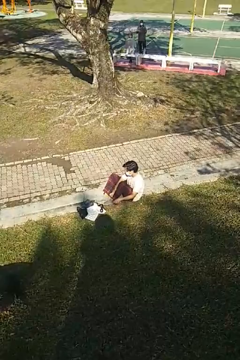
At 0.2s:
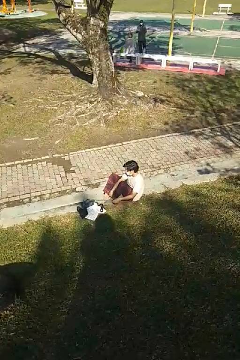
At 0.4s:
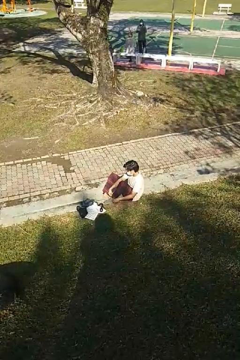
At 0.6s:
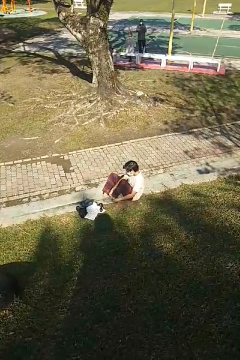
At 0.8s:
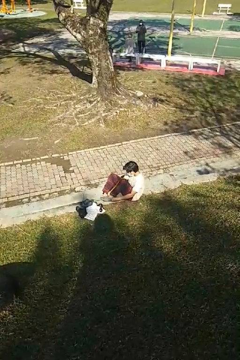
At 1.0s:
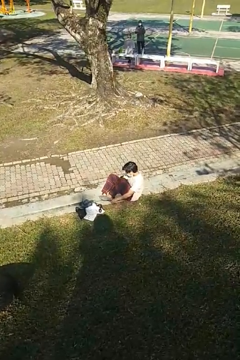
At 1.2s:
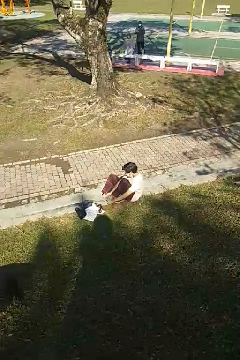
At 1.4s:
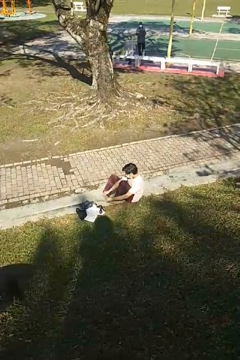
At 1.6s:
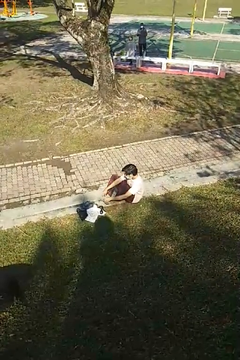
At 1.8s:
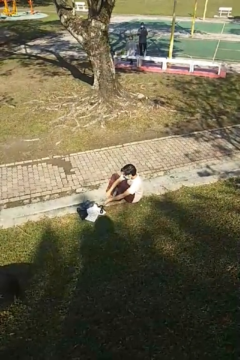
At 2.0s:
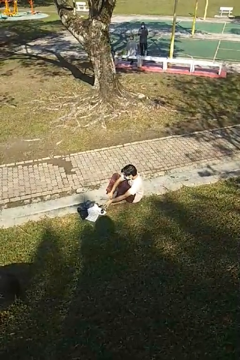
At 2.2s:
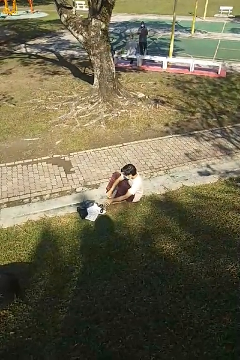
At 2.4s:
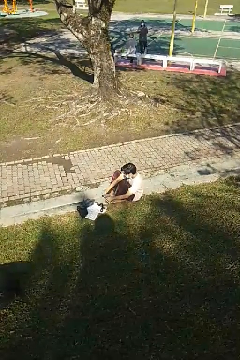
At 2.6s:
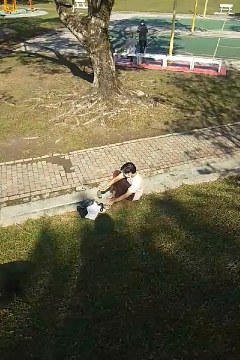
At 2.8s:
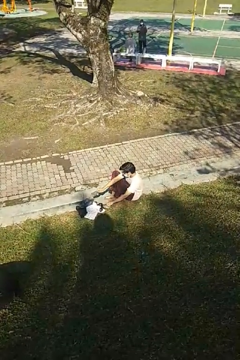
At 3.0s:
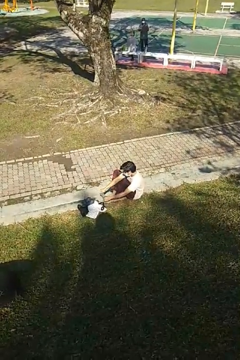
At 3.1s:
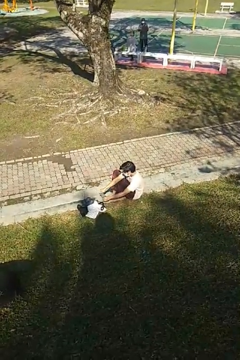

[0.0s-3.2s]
person takes off socks

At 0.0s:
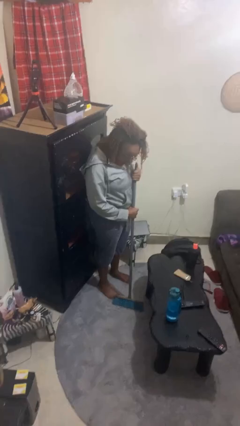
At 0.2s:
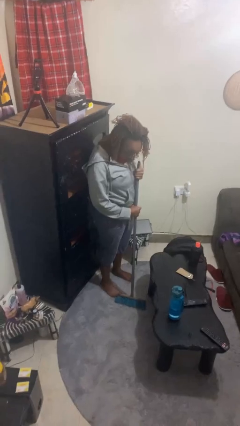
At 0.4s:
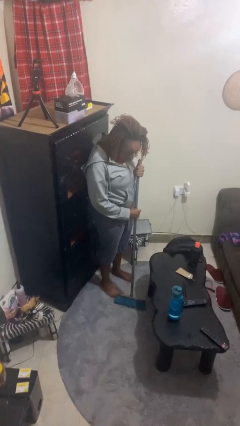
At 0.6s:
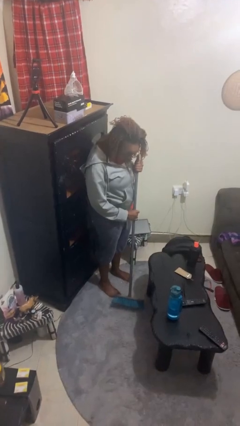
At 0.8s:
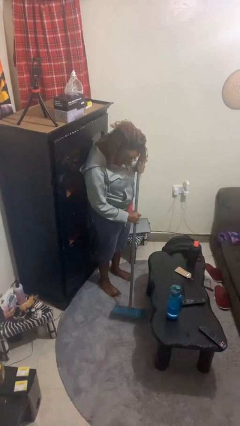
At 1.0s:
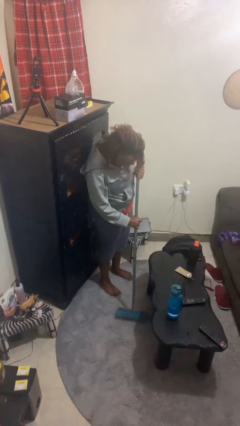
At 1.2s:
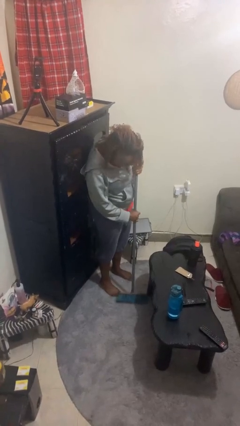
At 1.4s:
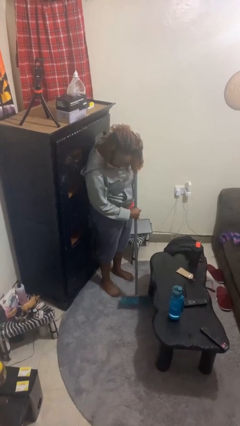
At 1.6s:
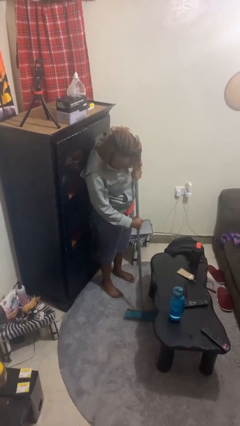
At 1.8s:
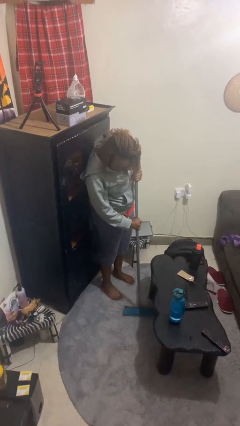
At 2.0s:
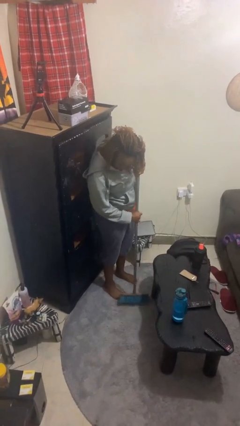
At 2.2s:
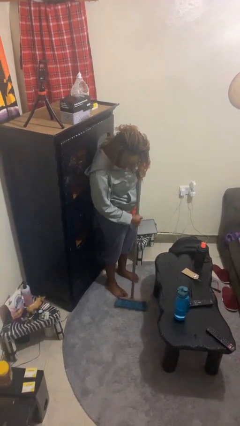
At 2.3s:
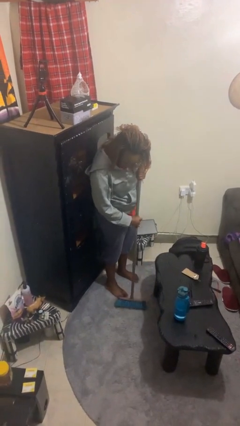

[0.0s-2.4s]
person sweeps floor

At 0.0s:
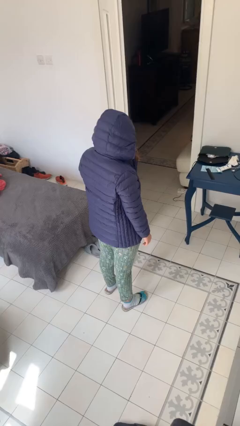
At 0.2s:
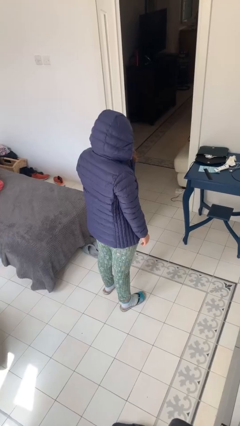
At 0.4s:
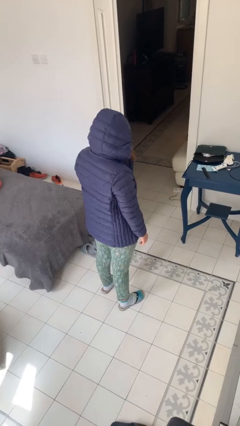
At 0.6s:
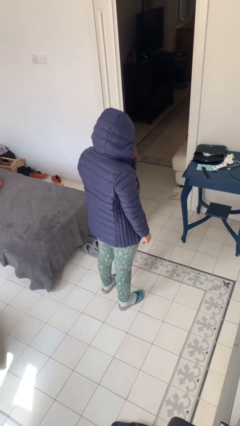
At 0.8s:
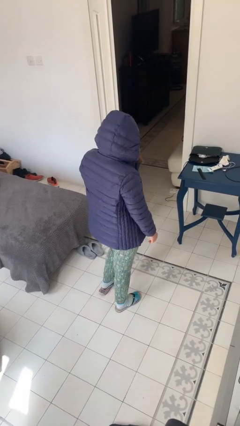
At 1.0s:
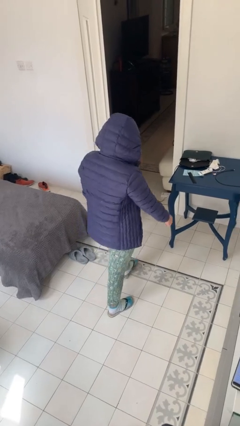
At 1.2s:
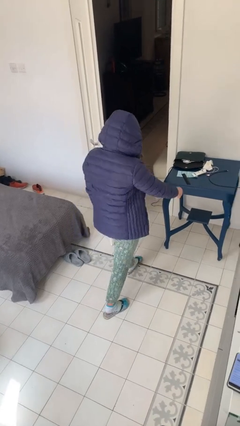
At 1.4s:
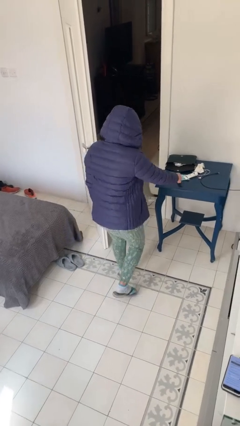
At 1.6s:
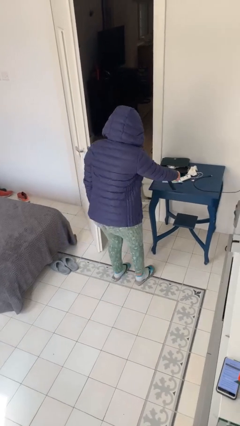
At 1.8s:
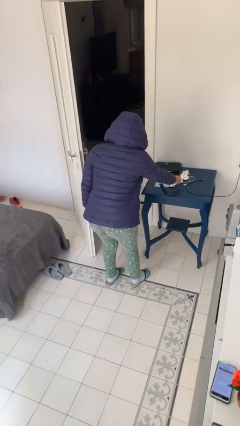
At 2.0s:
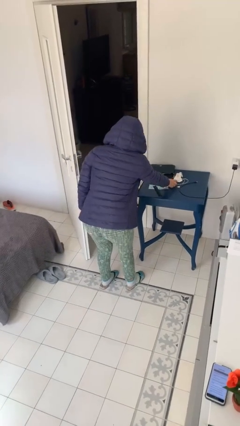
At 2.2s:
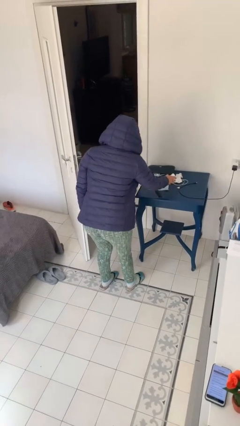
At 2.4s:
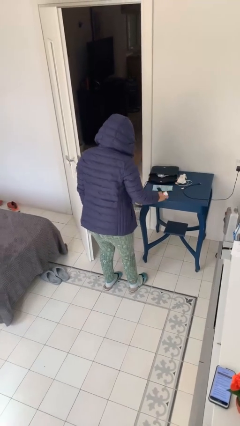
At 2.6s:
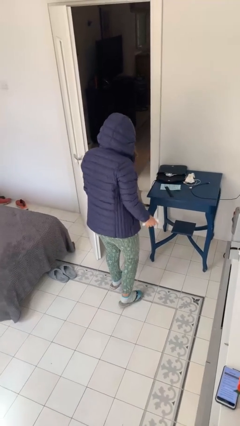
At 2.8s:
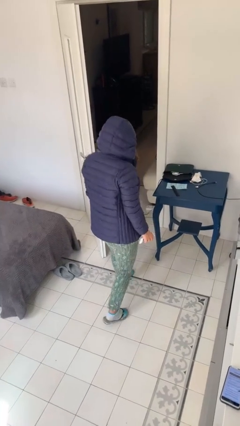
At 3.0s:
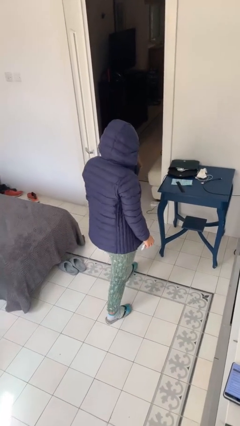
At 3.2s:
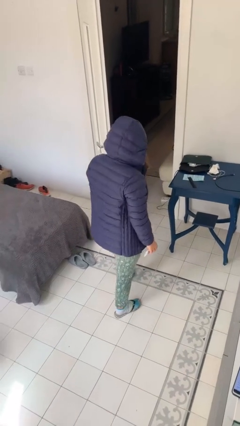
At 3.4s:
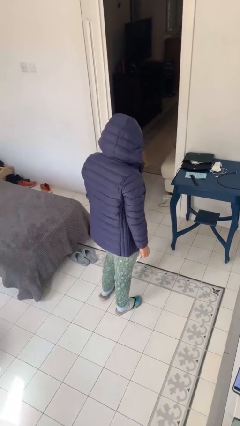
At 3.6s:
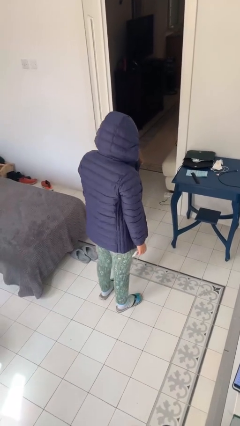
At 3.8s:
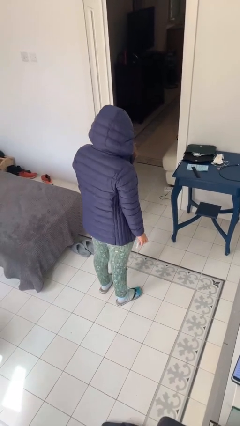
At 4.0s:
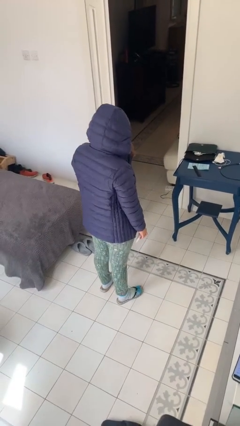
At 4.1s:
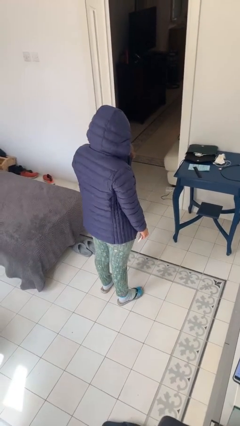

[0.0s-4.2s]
person picks up object from table

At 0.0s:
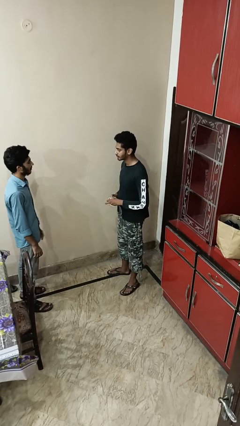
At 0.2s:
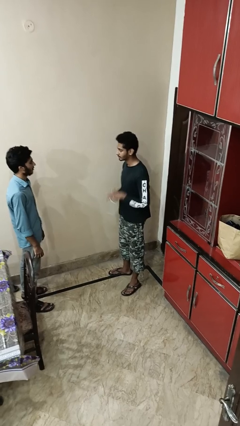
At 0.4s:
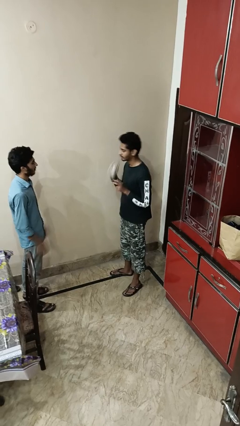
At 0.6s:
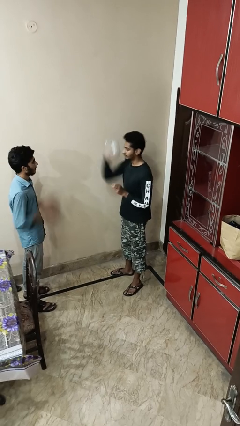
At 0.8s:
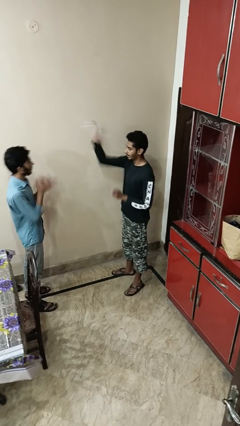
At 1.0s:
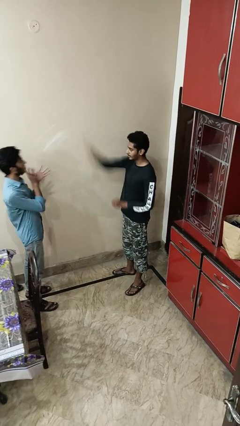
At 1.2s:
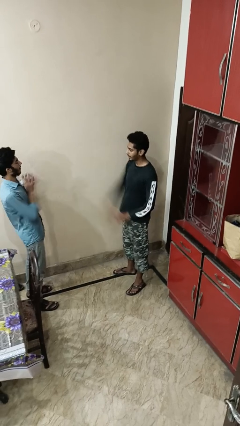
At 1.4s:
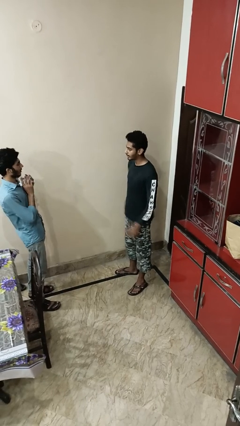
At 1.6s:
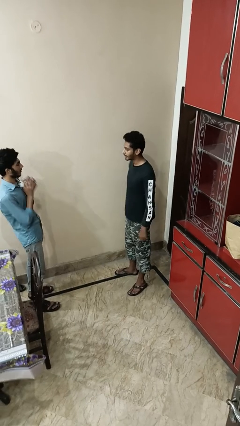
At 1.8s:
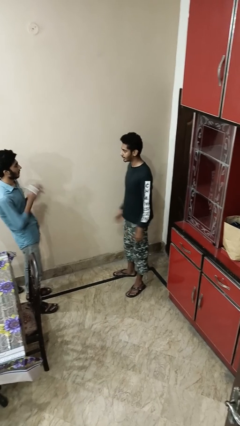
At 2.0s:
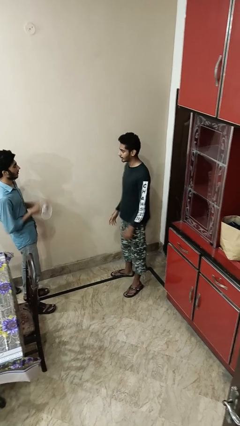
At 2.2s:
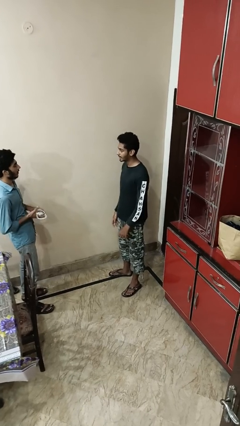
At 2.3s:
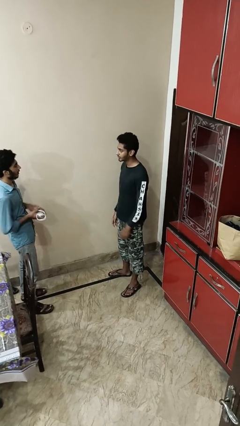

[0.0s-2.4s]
person throws object to person

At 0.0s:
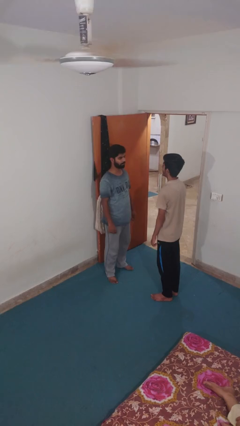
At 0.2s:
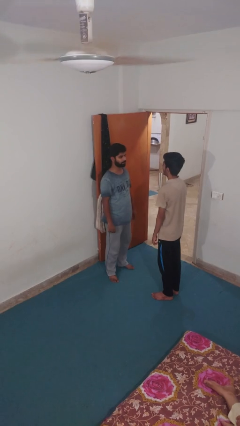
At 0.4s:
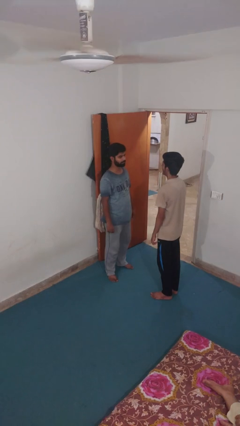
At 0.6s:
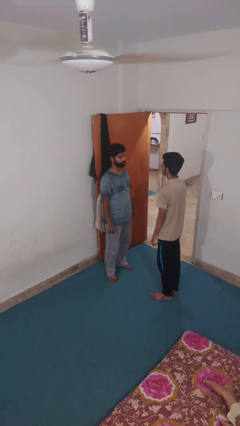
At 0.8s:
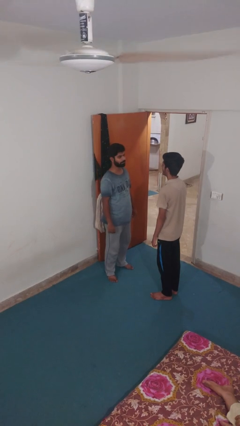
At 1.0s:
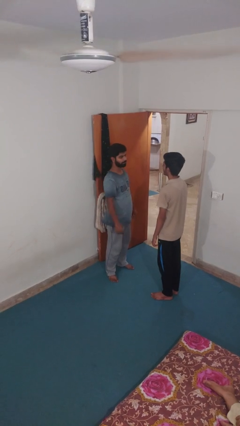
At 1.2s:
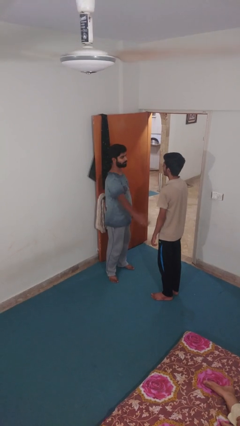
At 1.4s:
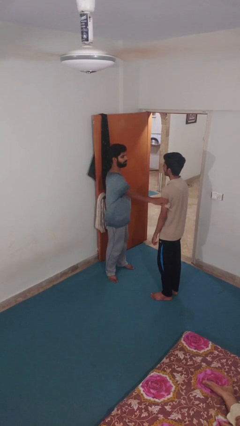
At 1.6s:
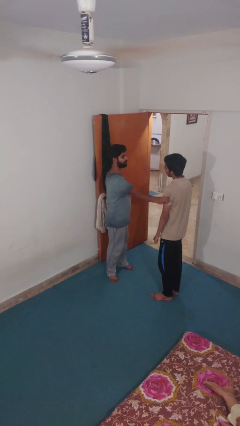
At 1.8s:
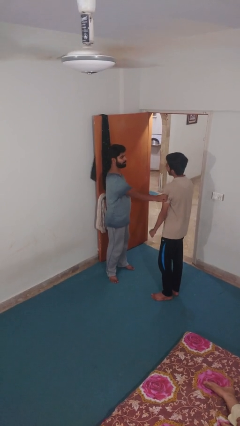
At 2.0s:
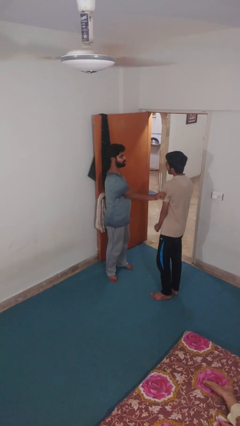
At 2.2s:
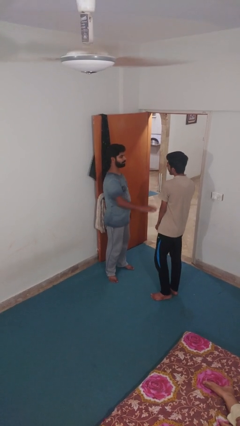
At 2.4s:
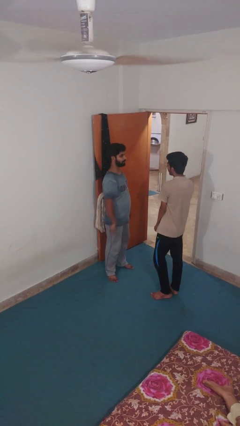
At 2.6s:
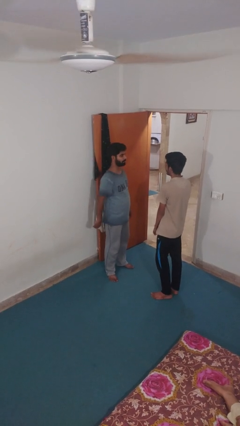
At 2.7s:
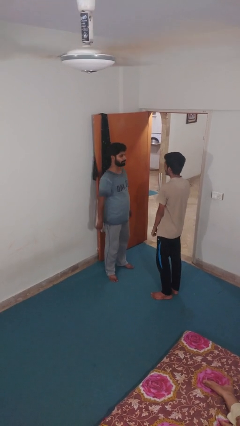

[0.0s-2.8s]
person grabs person by bicep

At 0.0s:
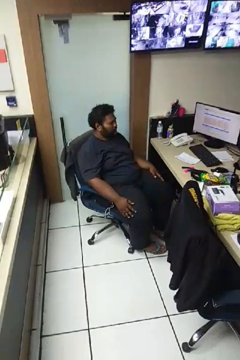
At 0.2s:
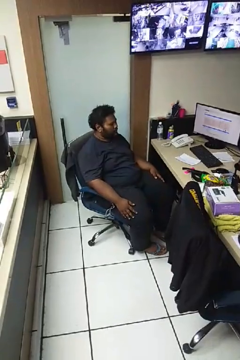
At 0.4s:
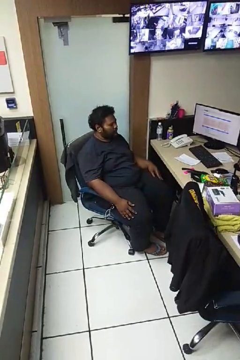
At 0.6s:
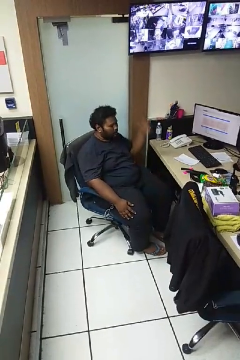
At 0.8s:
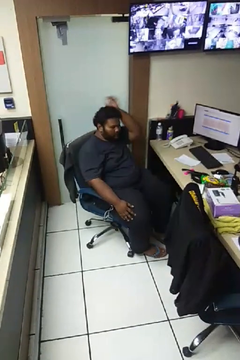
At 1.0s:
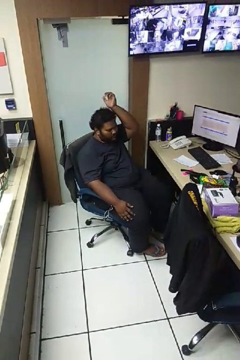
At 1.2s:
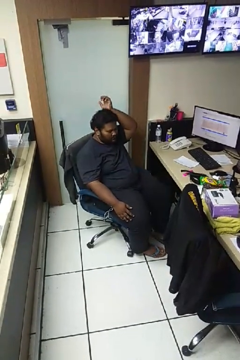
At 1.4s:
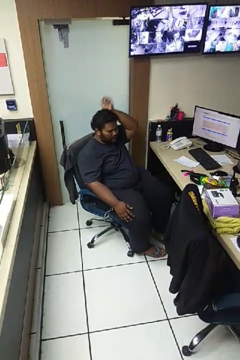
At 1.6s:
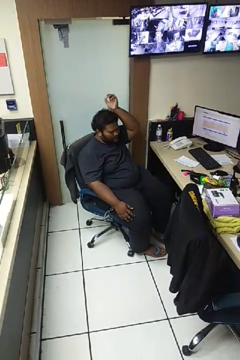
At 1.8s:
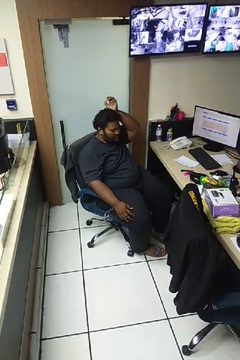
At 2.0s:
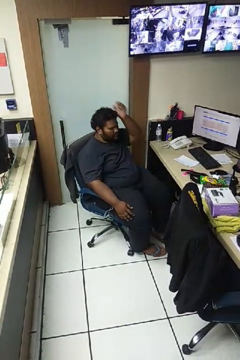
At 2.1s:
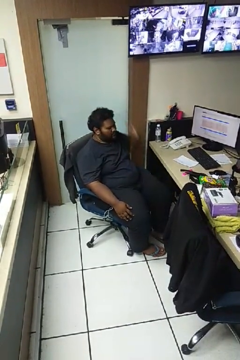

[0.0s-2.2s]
person pats head

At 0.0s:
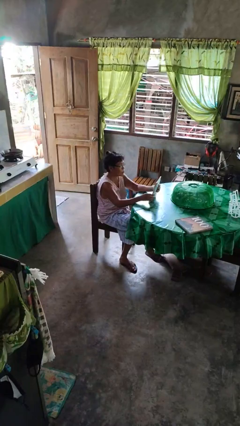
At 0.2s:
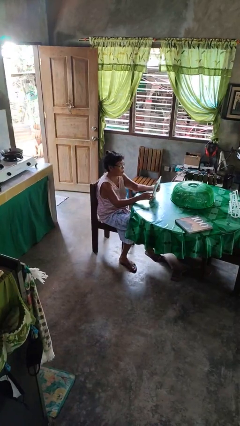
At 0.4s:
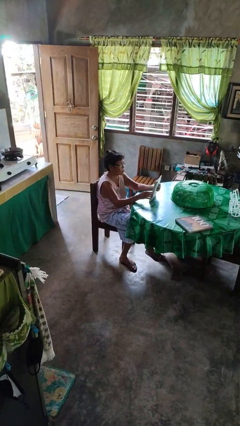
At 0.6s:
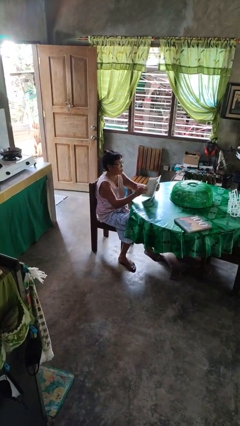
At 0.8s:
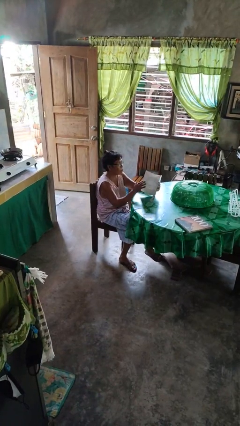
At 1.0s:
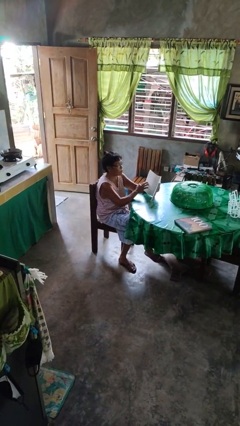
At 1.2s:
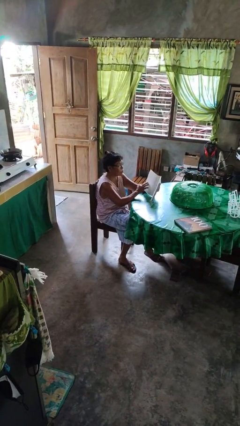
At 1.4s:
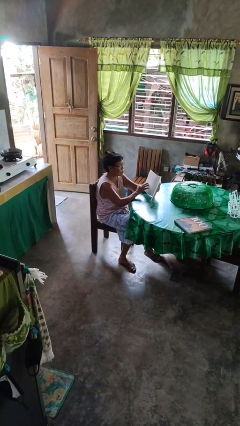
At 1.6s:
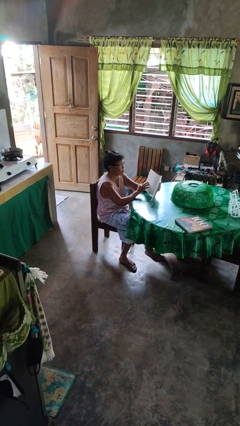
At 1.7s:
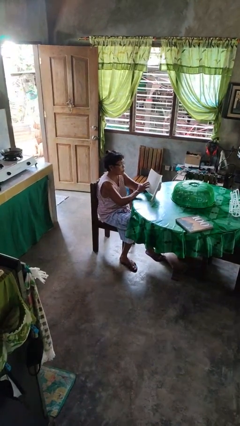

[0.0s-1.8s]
person reads magazine
